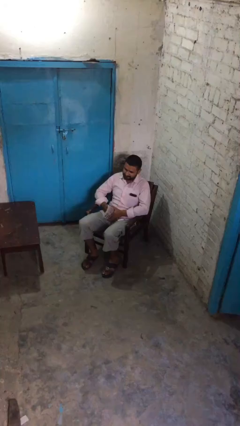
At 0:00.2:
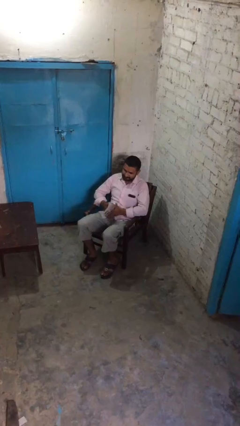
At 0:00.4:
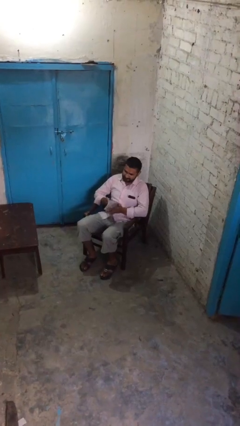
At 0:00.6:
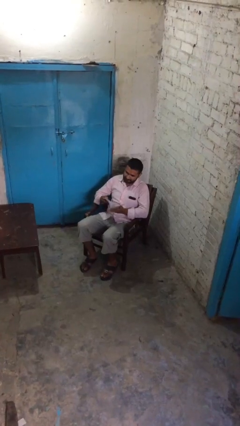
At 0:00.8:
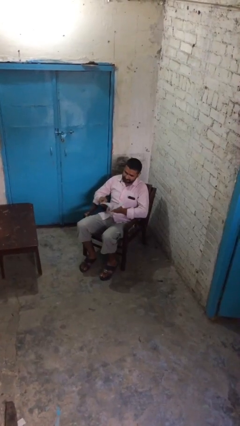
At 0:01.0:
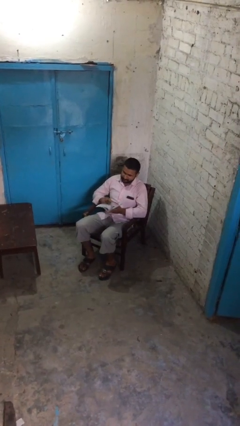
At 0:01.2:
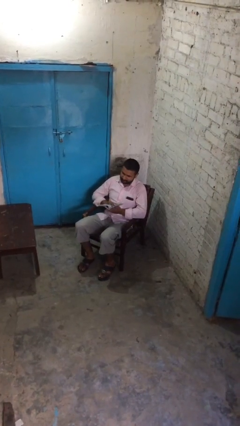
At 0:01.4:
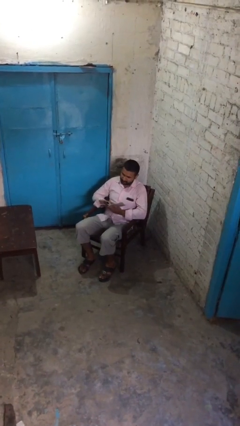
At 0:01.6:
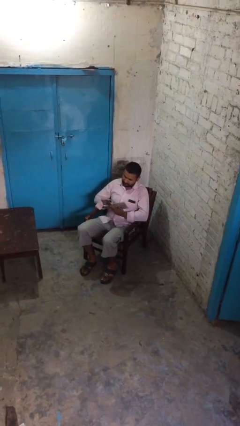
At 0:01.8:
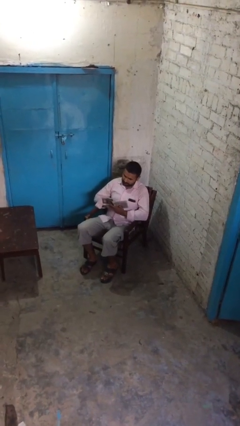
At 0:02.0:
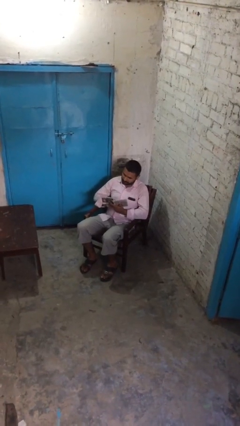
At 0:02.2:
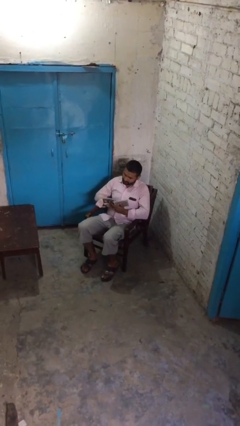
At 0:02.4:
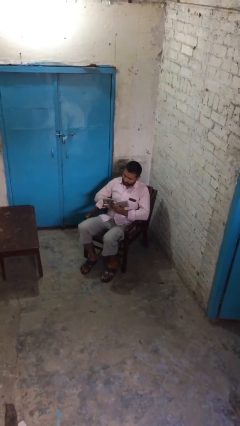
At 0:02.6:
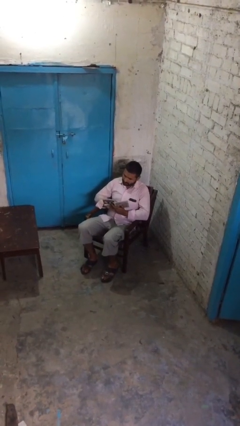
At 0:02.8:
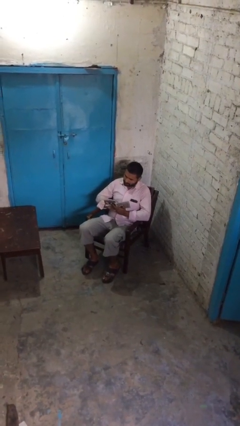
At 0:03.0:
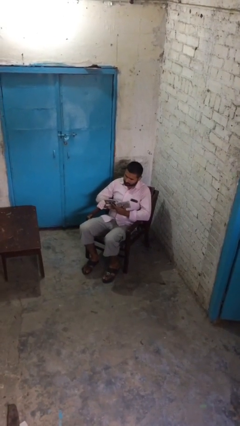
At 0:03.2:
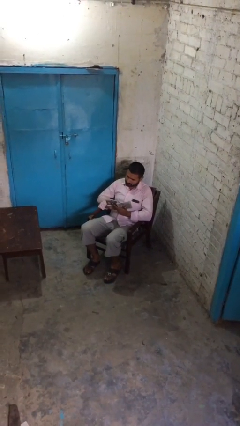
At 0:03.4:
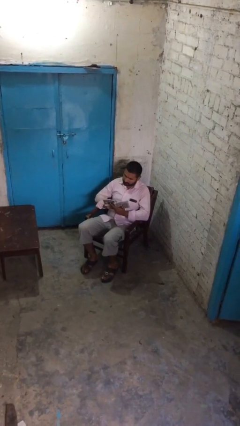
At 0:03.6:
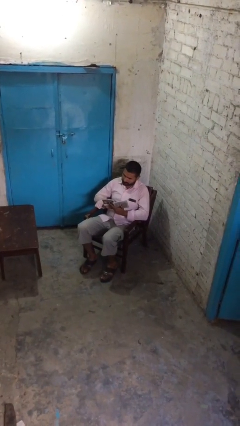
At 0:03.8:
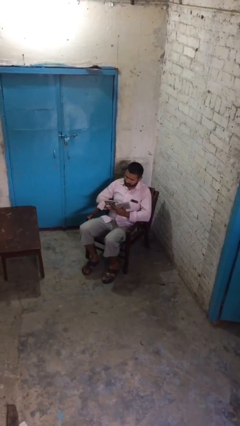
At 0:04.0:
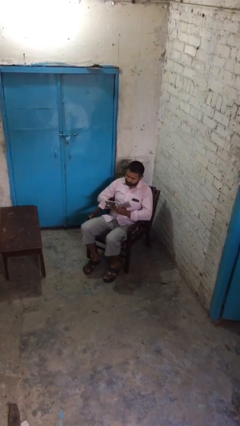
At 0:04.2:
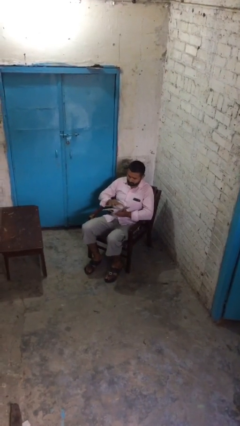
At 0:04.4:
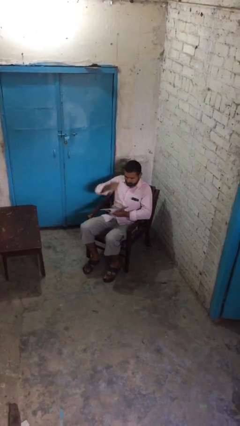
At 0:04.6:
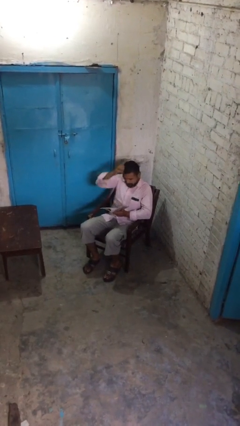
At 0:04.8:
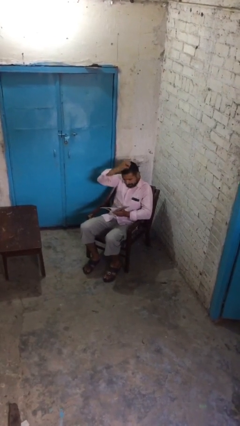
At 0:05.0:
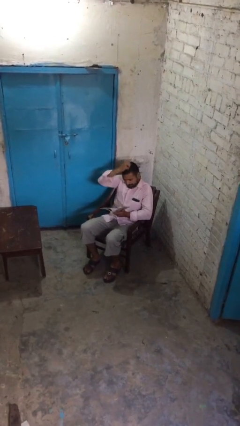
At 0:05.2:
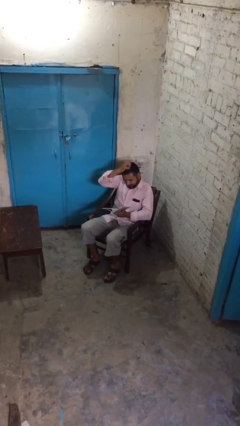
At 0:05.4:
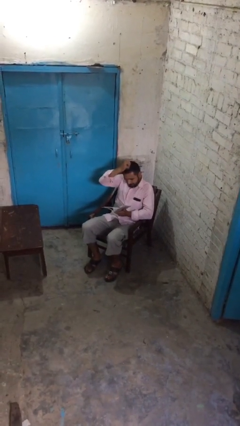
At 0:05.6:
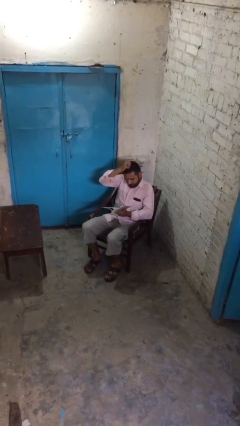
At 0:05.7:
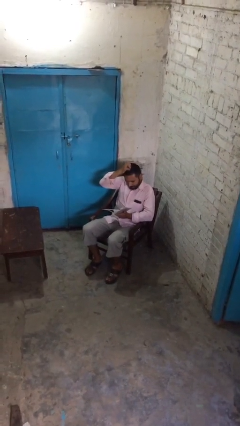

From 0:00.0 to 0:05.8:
person reads document

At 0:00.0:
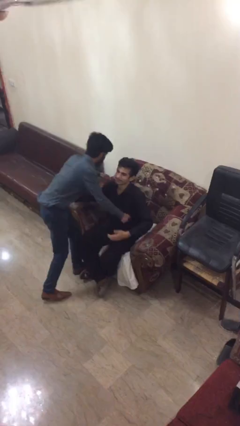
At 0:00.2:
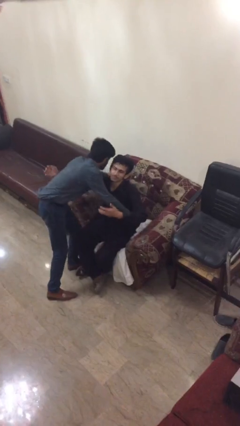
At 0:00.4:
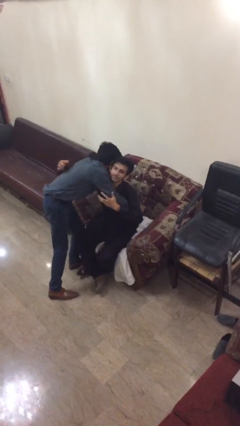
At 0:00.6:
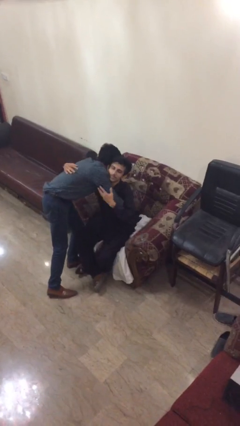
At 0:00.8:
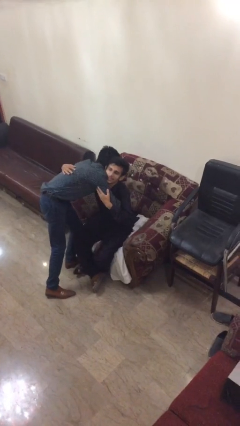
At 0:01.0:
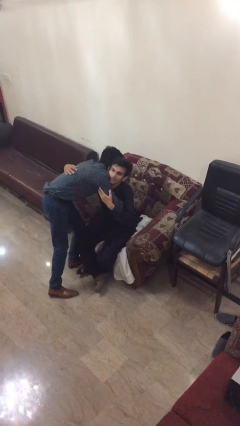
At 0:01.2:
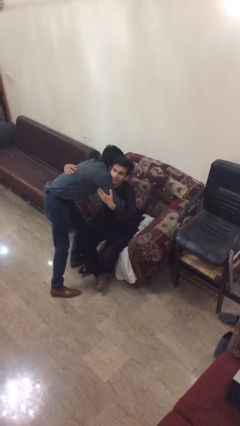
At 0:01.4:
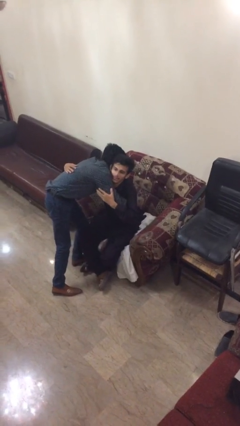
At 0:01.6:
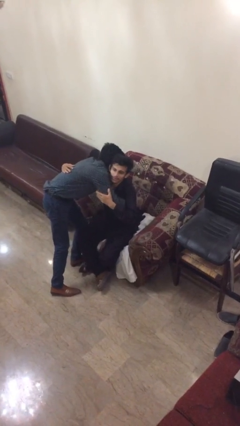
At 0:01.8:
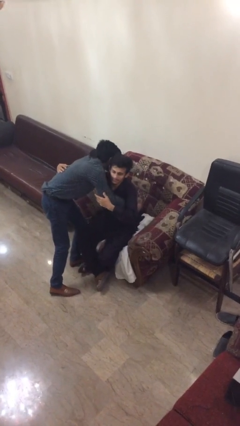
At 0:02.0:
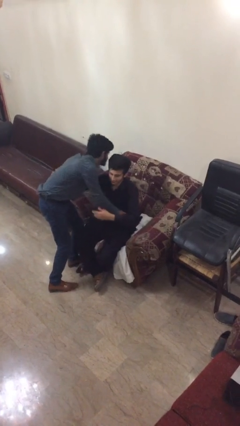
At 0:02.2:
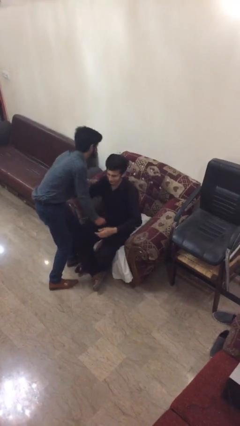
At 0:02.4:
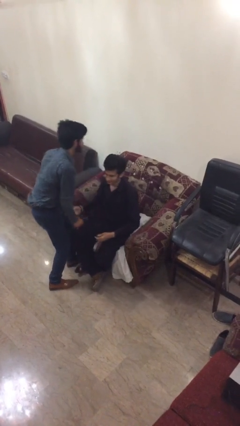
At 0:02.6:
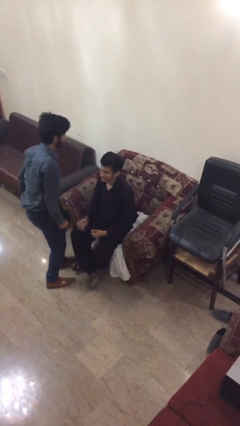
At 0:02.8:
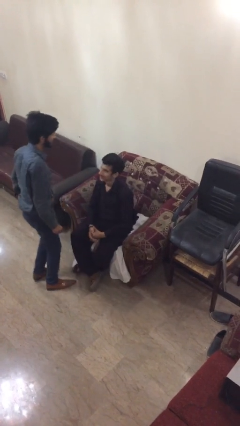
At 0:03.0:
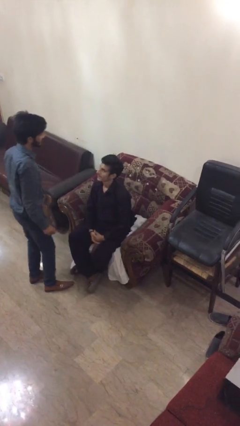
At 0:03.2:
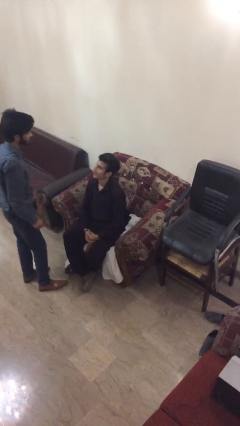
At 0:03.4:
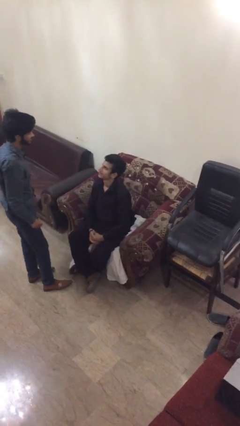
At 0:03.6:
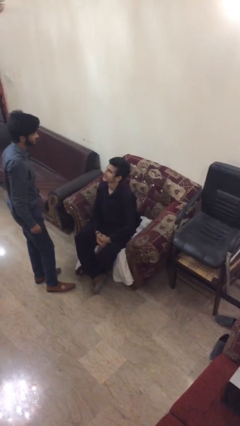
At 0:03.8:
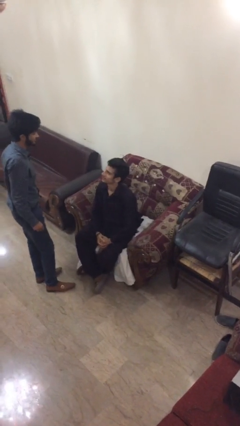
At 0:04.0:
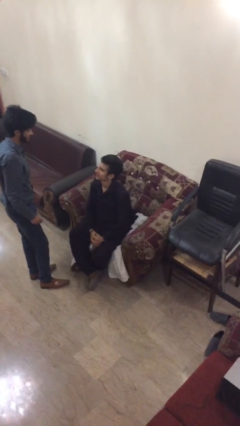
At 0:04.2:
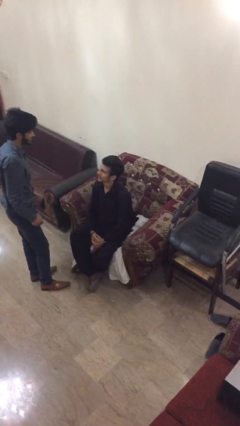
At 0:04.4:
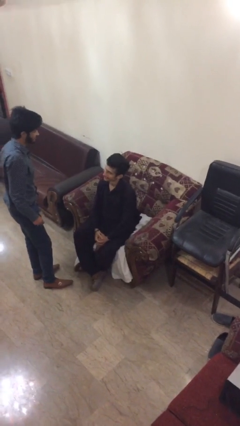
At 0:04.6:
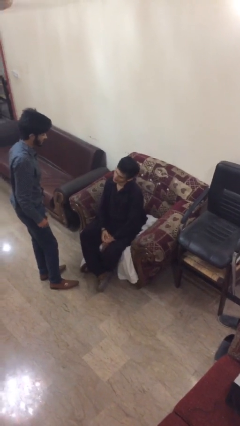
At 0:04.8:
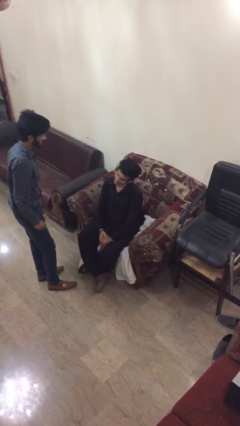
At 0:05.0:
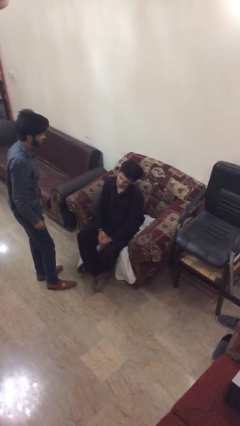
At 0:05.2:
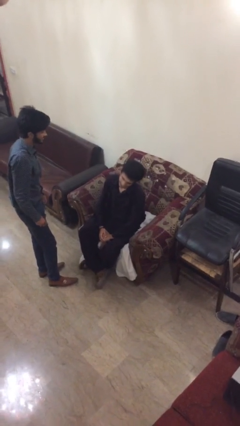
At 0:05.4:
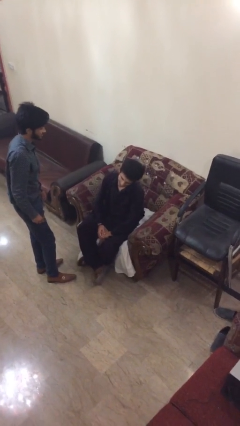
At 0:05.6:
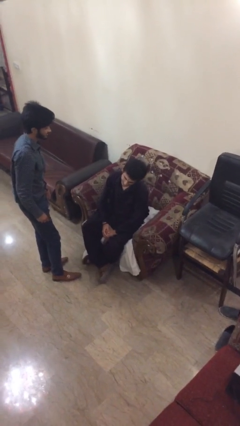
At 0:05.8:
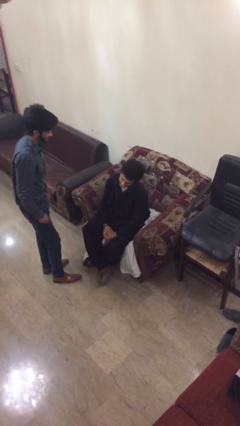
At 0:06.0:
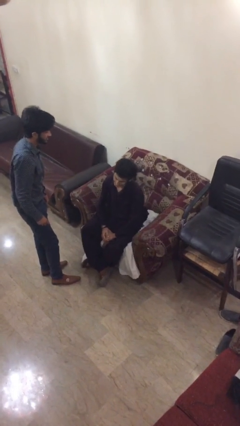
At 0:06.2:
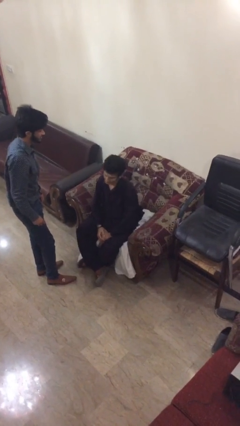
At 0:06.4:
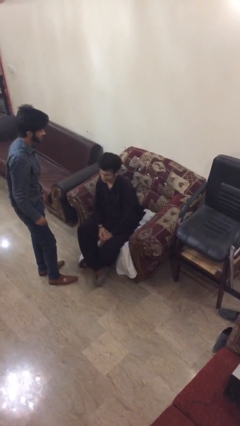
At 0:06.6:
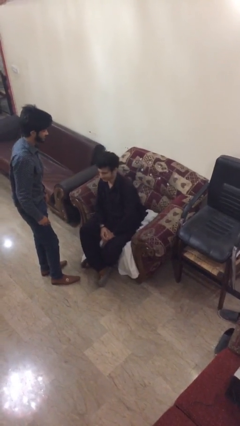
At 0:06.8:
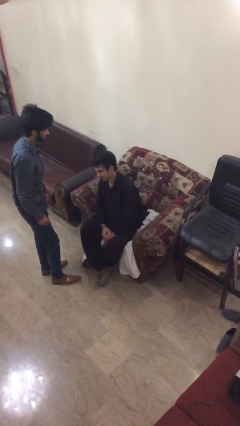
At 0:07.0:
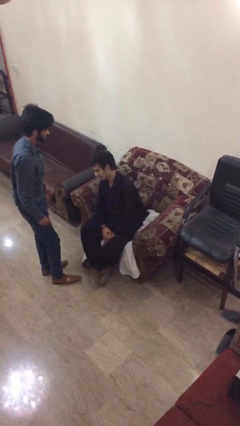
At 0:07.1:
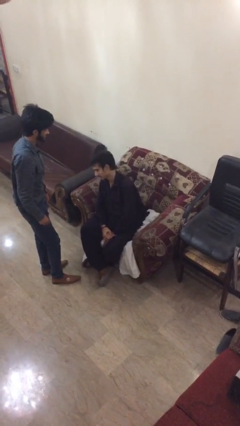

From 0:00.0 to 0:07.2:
person embraces person

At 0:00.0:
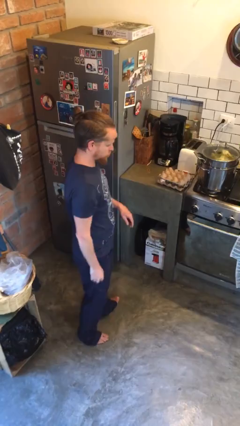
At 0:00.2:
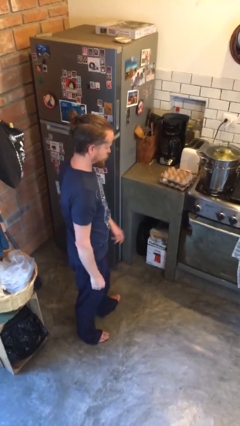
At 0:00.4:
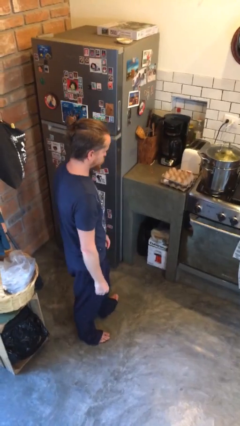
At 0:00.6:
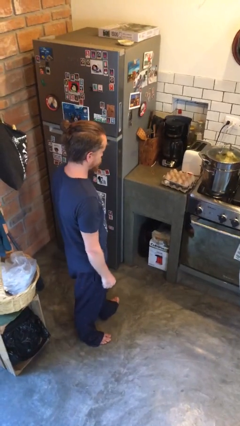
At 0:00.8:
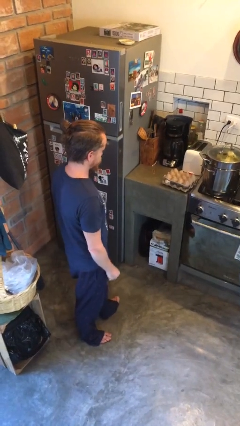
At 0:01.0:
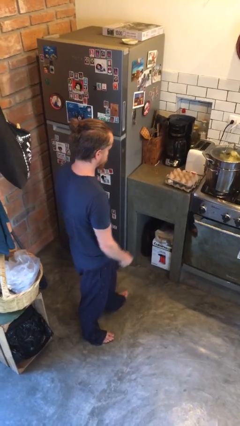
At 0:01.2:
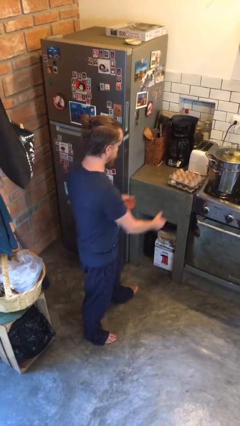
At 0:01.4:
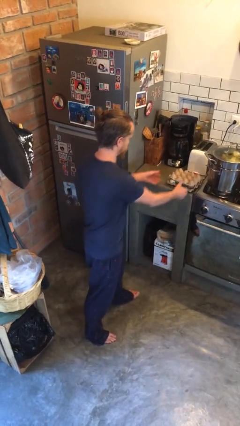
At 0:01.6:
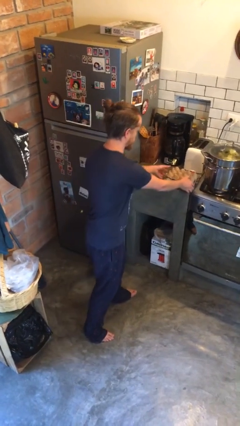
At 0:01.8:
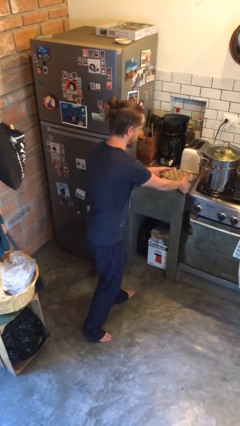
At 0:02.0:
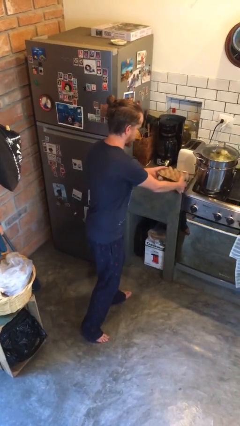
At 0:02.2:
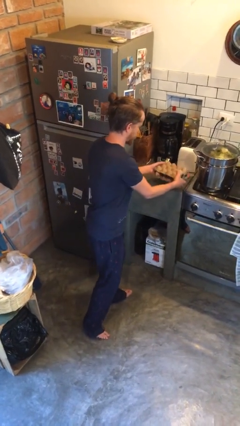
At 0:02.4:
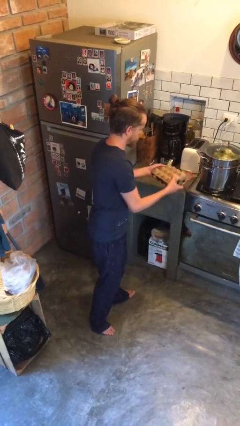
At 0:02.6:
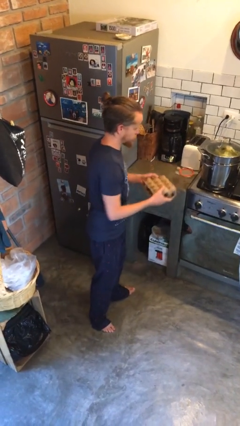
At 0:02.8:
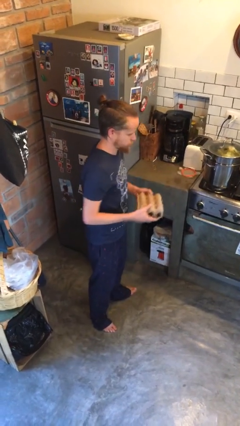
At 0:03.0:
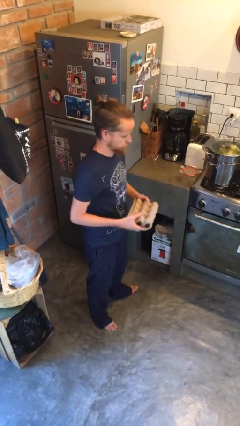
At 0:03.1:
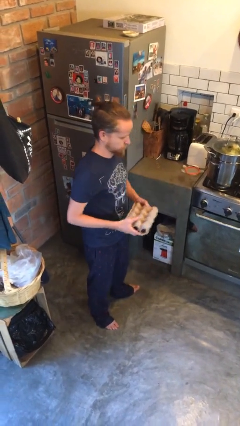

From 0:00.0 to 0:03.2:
person picks up object from countertop

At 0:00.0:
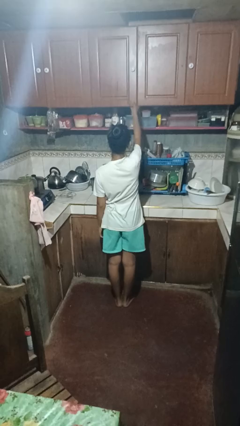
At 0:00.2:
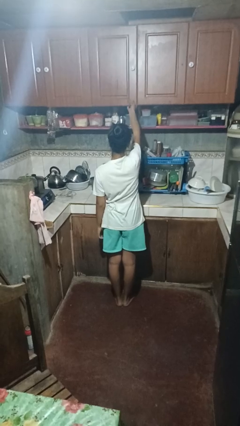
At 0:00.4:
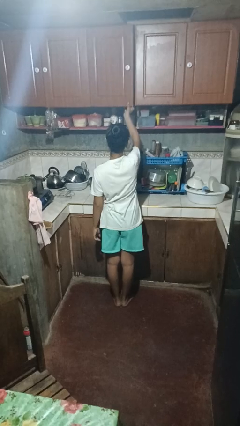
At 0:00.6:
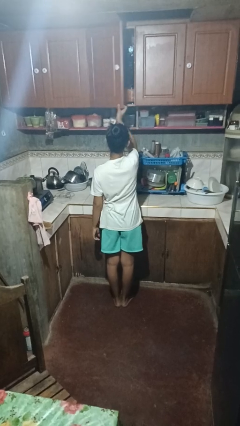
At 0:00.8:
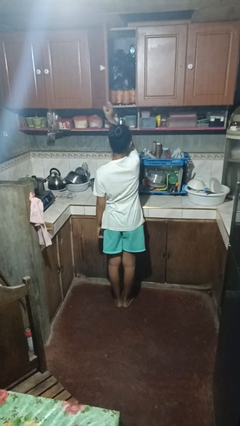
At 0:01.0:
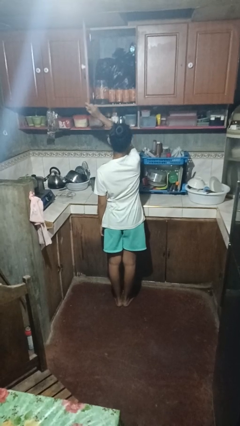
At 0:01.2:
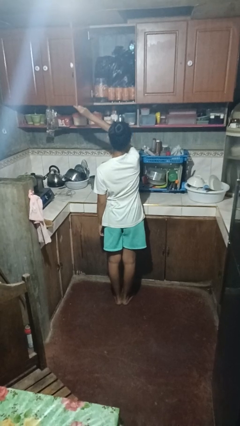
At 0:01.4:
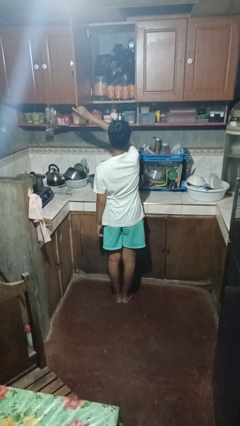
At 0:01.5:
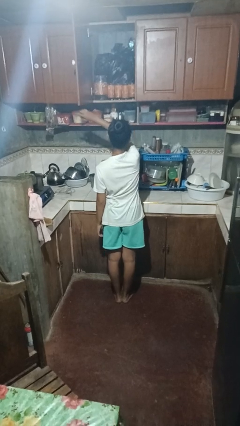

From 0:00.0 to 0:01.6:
person opens cabinet
